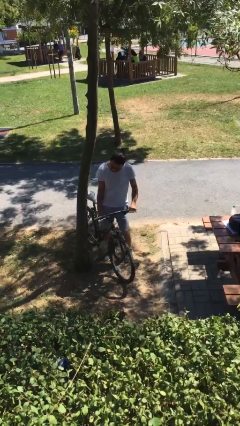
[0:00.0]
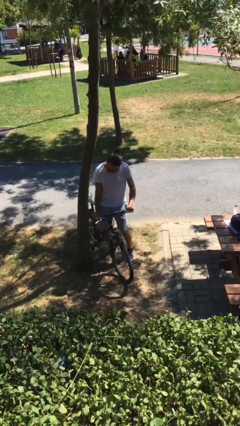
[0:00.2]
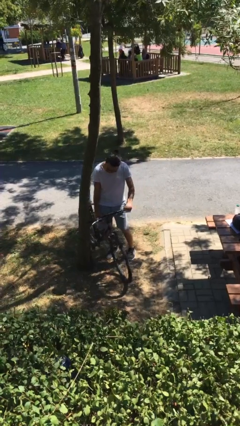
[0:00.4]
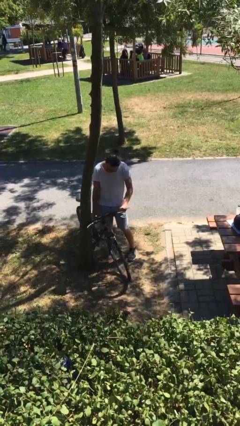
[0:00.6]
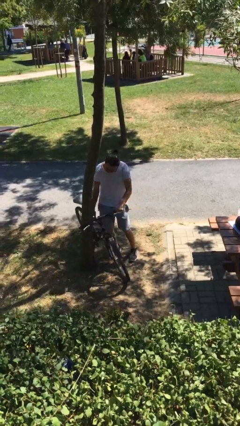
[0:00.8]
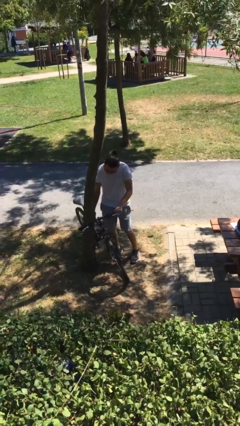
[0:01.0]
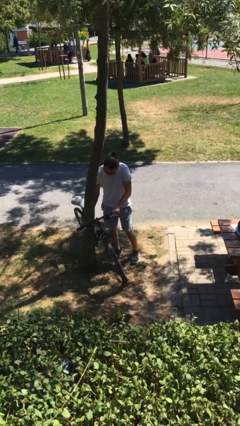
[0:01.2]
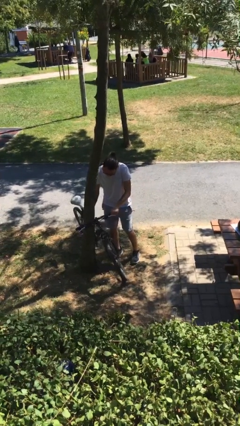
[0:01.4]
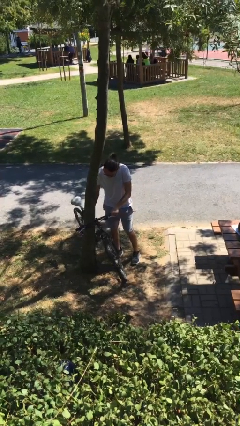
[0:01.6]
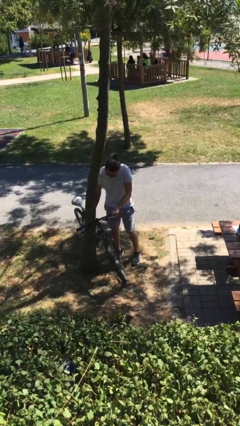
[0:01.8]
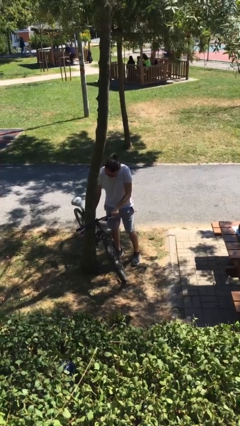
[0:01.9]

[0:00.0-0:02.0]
person puts down object on floor

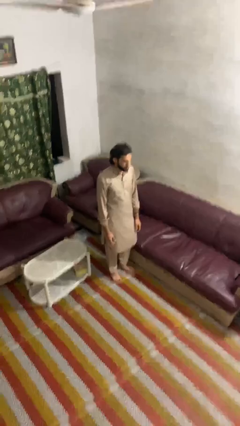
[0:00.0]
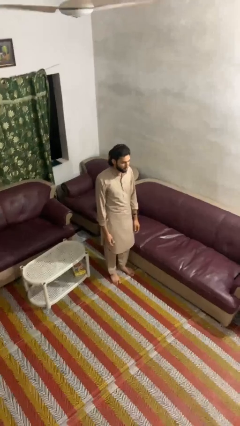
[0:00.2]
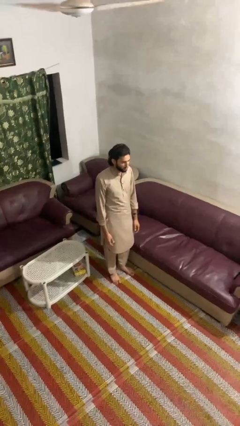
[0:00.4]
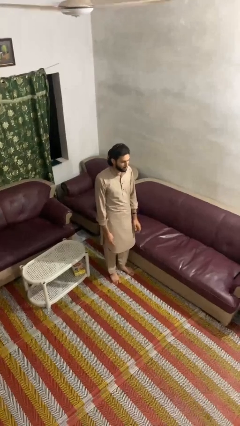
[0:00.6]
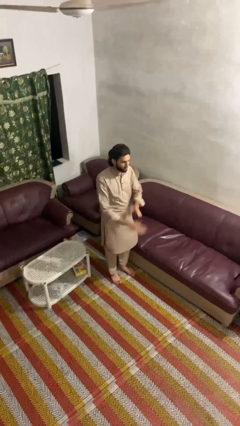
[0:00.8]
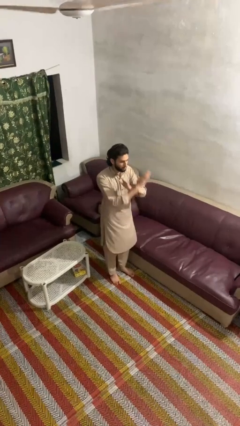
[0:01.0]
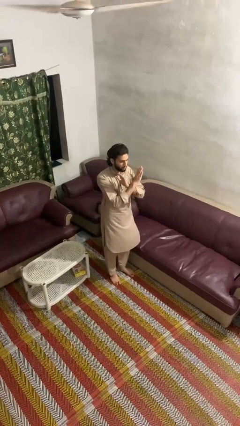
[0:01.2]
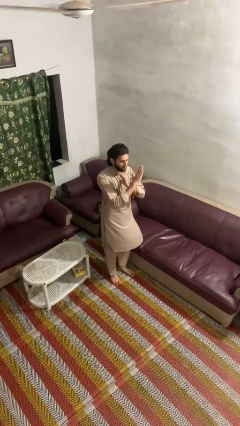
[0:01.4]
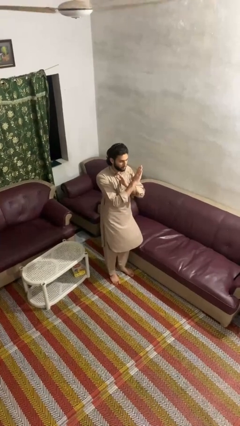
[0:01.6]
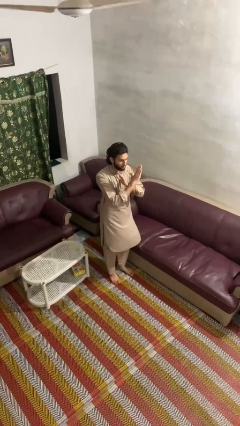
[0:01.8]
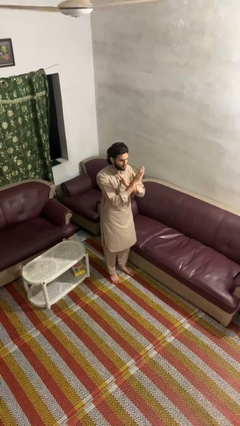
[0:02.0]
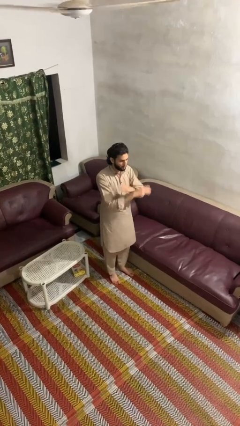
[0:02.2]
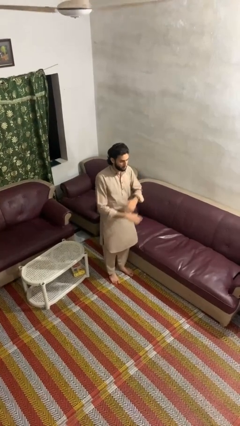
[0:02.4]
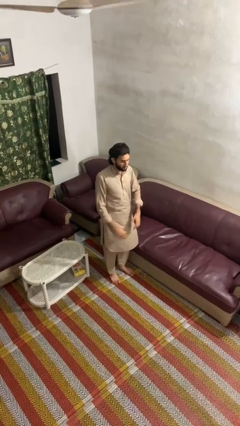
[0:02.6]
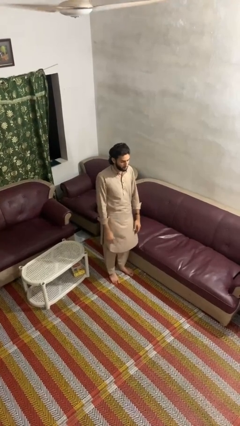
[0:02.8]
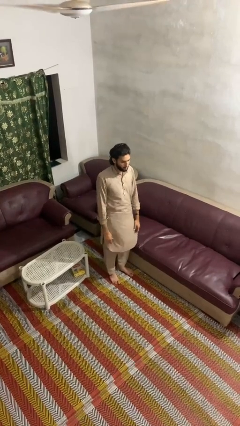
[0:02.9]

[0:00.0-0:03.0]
person gestures arms x

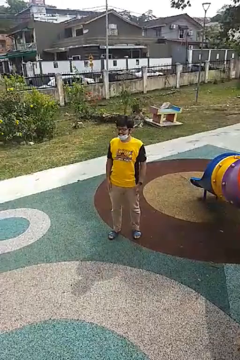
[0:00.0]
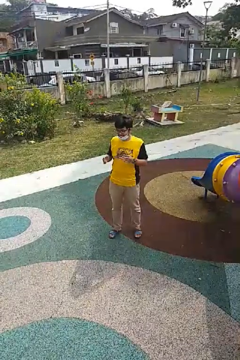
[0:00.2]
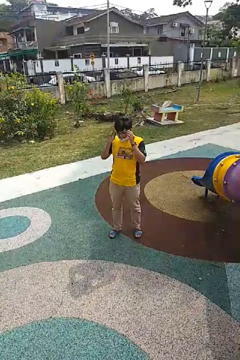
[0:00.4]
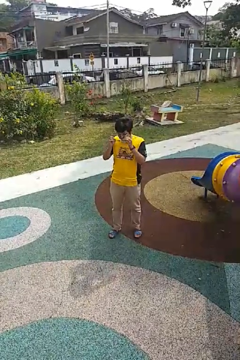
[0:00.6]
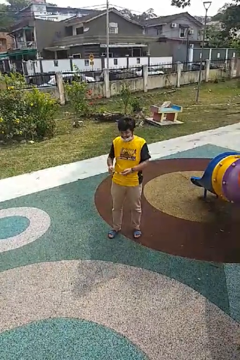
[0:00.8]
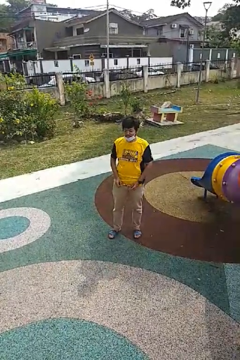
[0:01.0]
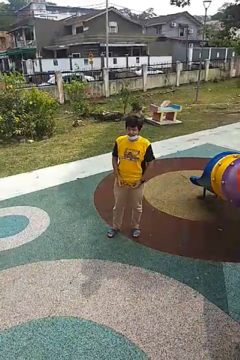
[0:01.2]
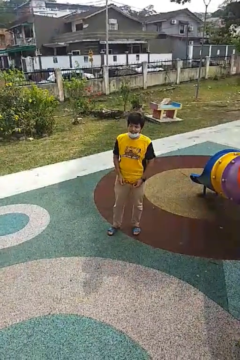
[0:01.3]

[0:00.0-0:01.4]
person takes off glasses

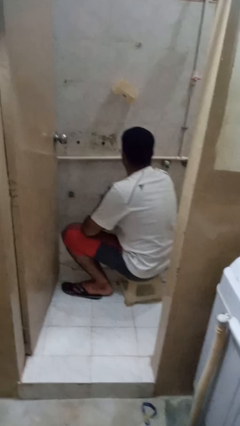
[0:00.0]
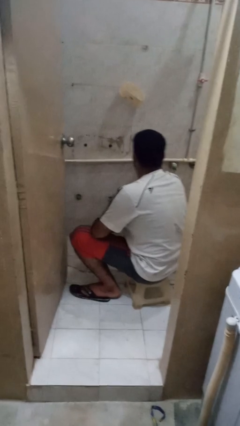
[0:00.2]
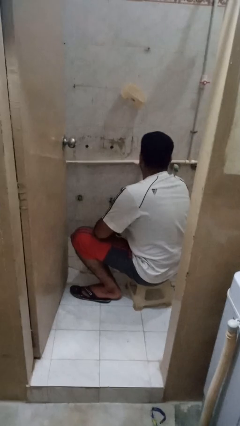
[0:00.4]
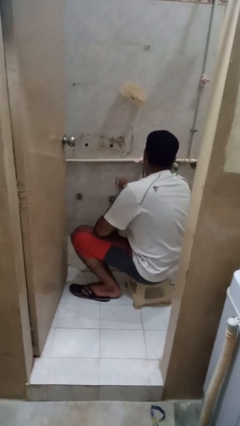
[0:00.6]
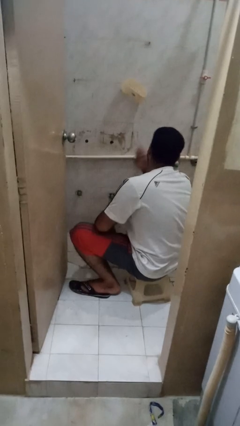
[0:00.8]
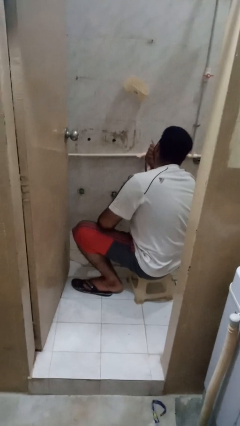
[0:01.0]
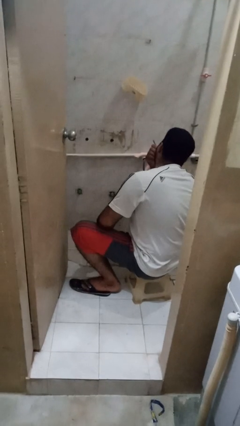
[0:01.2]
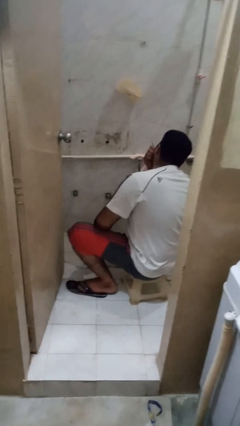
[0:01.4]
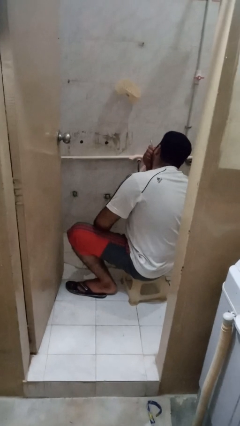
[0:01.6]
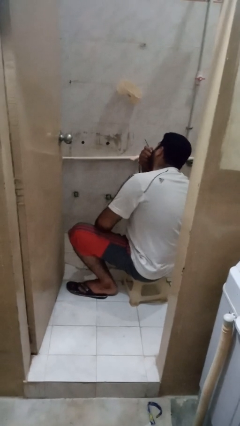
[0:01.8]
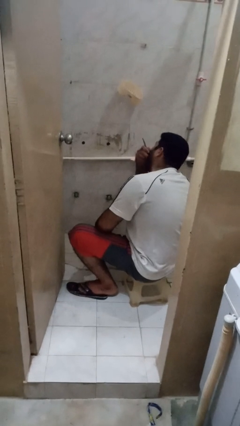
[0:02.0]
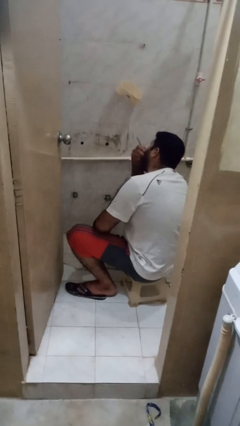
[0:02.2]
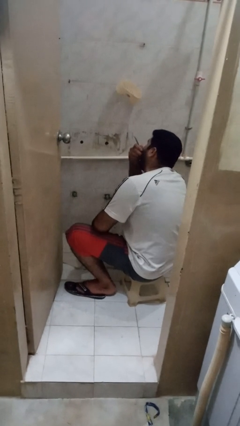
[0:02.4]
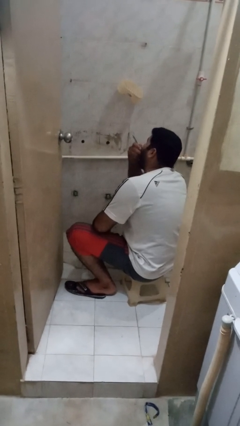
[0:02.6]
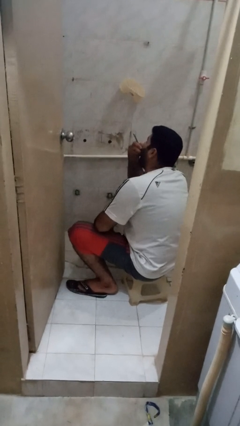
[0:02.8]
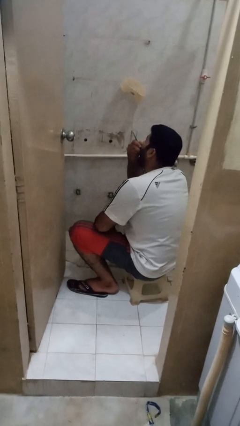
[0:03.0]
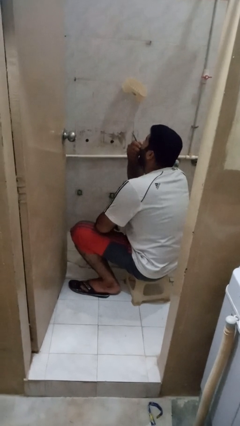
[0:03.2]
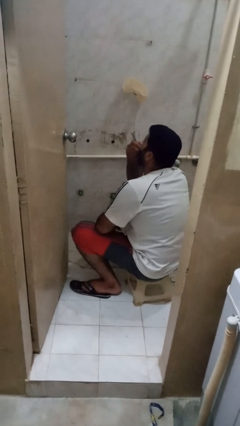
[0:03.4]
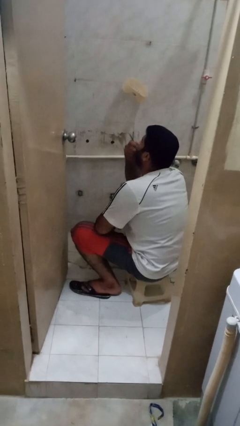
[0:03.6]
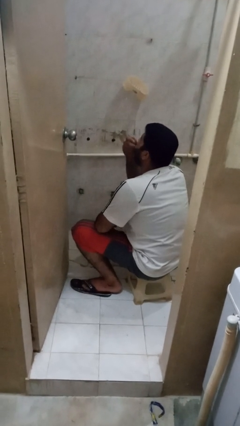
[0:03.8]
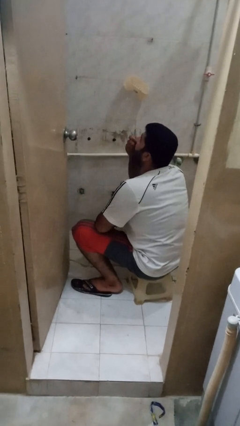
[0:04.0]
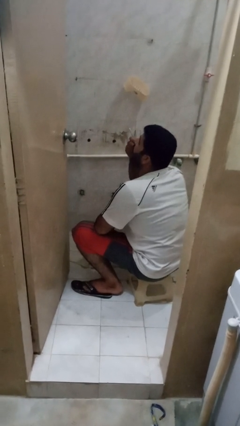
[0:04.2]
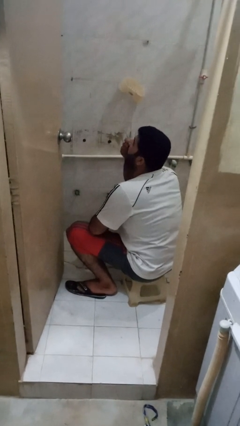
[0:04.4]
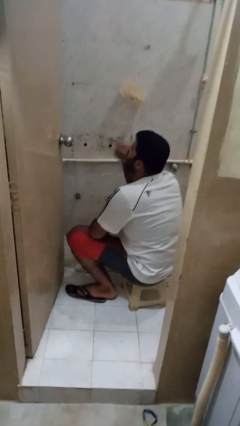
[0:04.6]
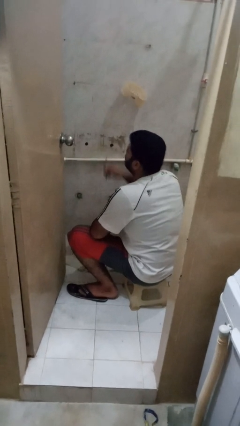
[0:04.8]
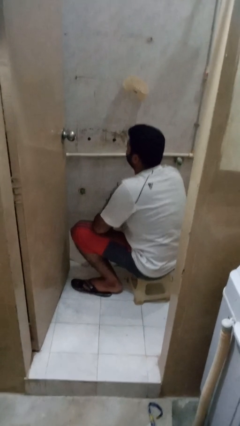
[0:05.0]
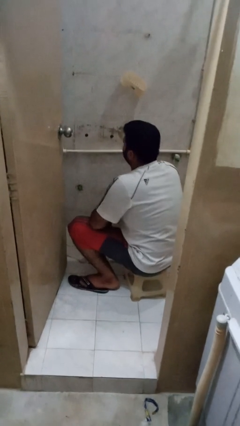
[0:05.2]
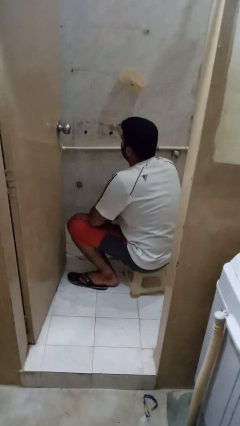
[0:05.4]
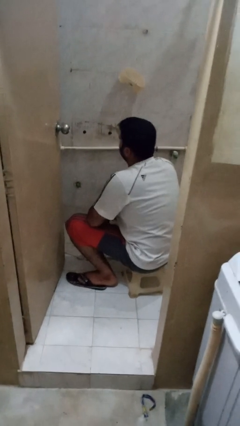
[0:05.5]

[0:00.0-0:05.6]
person flosses

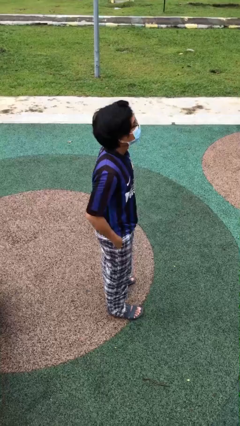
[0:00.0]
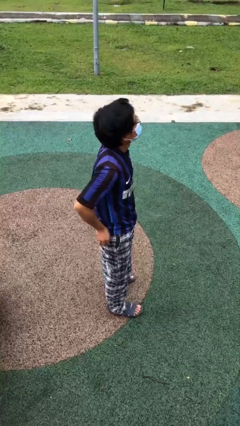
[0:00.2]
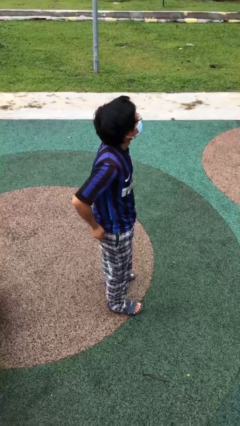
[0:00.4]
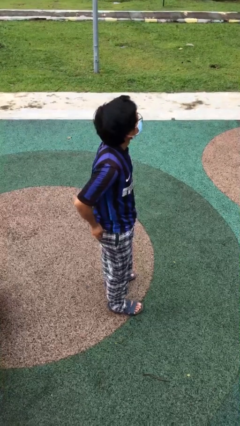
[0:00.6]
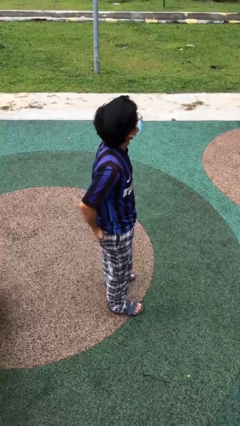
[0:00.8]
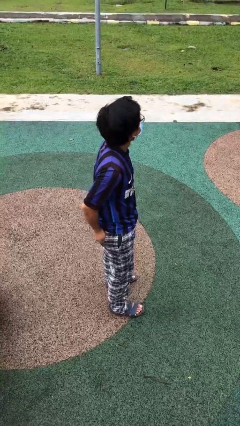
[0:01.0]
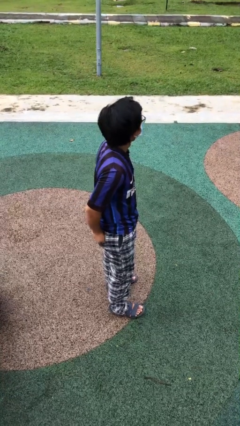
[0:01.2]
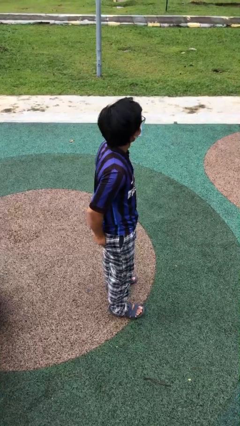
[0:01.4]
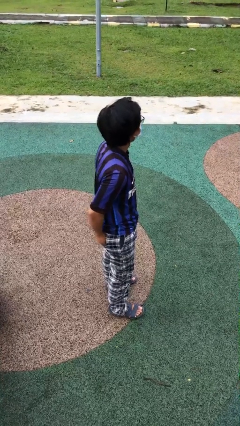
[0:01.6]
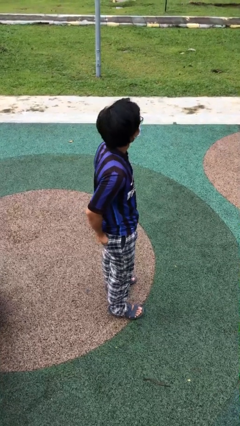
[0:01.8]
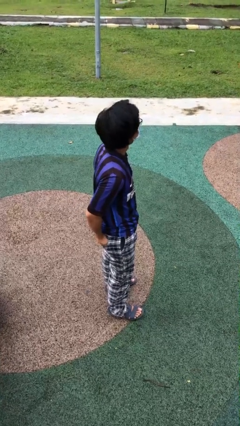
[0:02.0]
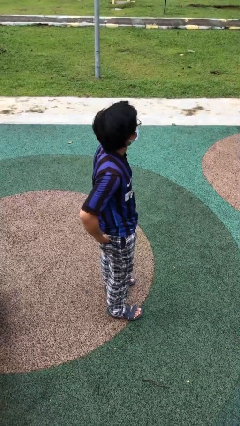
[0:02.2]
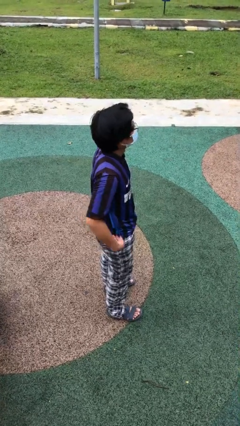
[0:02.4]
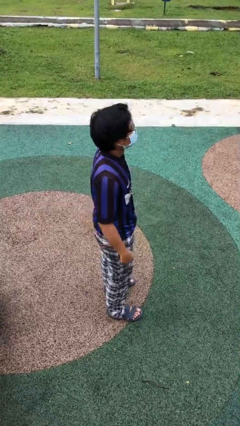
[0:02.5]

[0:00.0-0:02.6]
person puts hands in back pockets

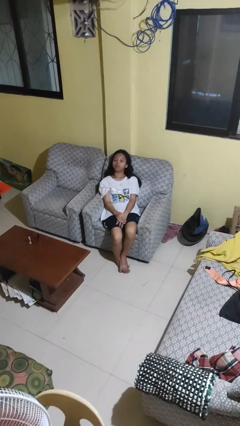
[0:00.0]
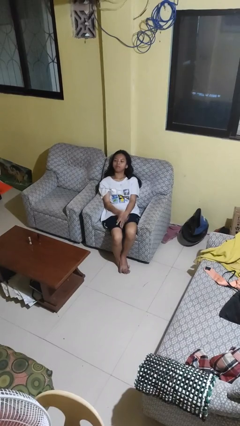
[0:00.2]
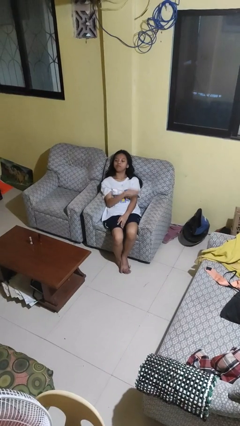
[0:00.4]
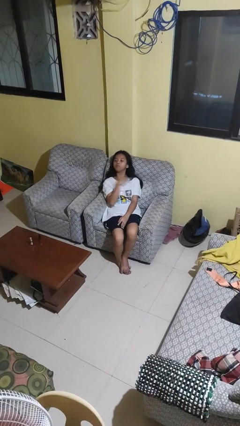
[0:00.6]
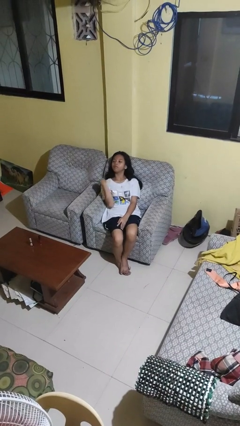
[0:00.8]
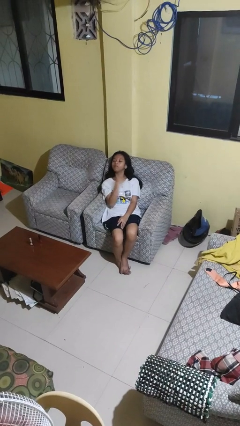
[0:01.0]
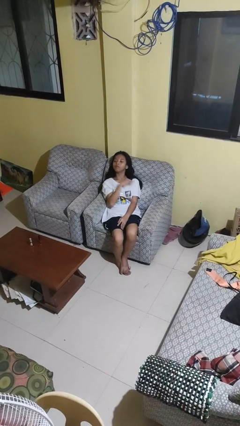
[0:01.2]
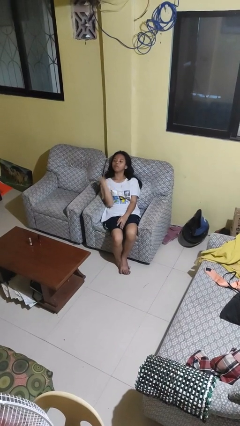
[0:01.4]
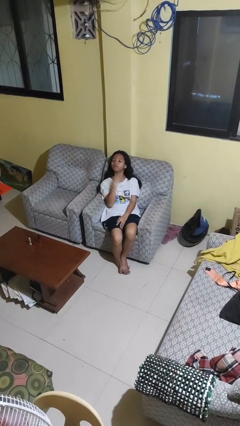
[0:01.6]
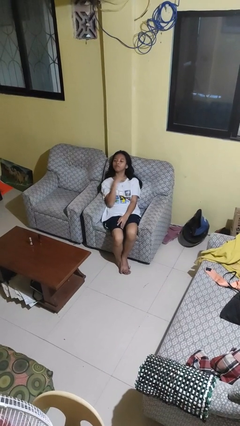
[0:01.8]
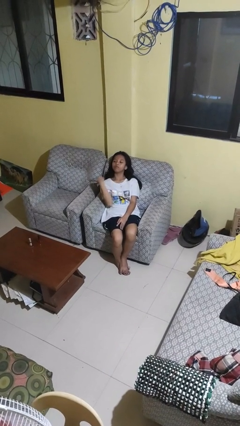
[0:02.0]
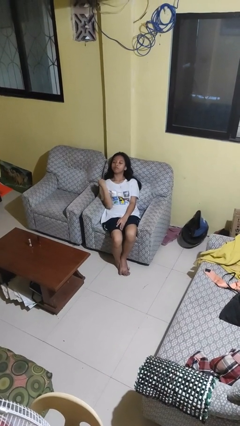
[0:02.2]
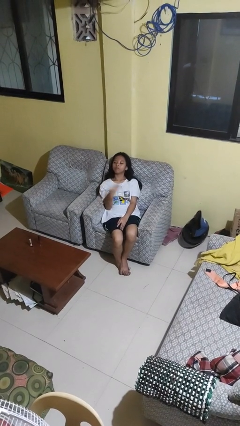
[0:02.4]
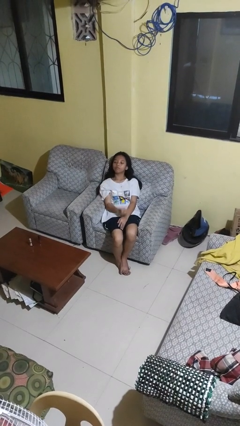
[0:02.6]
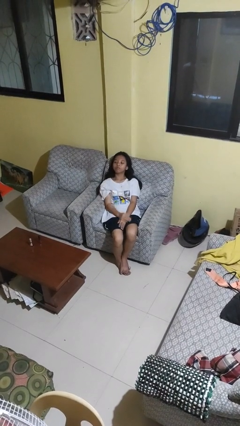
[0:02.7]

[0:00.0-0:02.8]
person gestures cut
